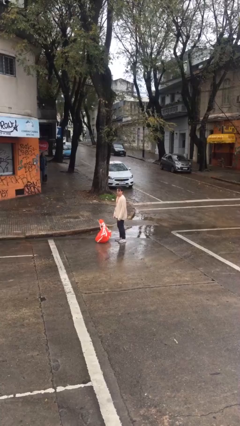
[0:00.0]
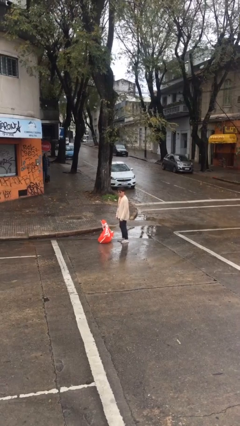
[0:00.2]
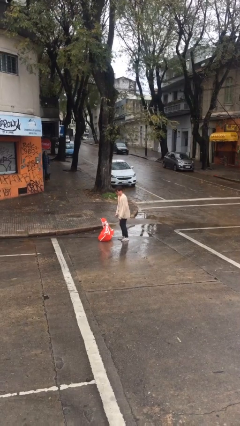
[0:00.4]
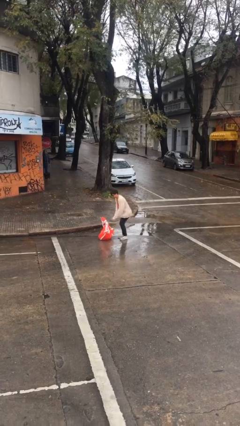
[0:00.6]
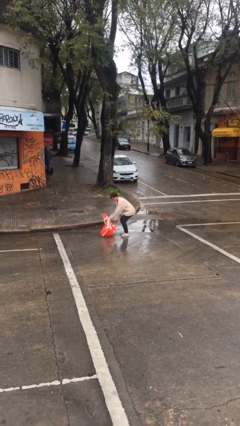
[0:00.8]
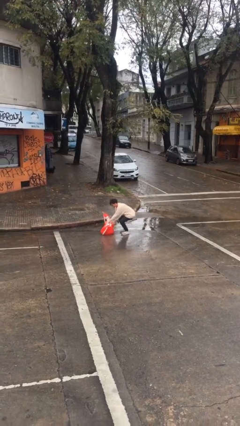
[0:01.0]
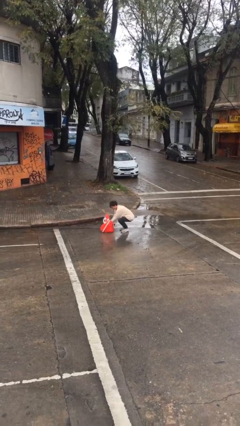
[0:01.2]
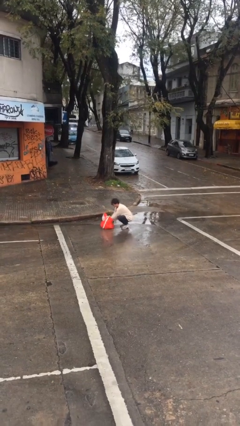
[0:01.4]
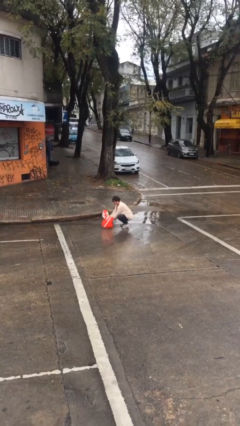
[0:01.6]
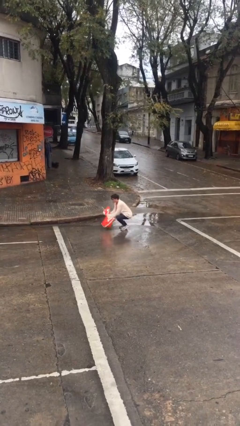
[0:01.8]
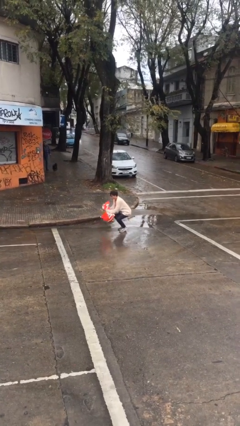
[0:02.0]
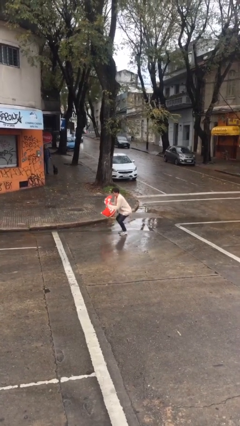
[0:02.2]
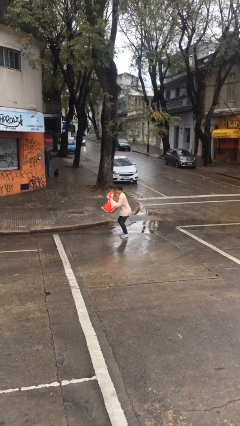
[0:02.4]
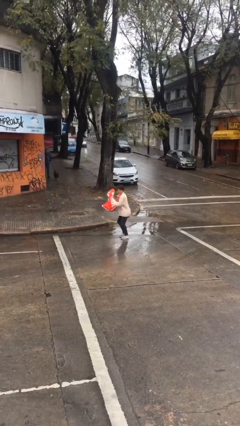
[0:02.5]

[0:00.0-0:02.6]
person picks up object from floor

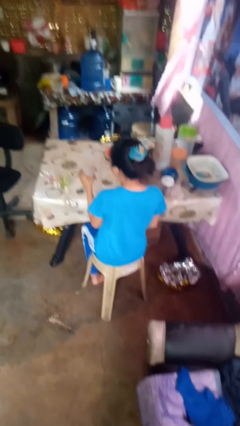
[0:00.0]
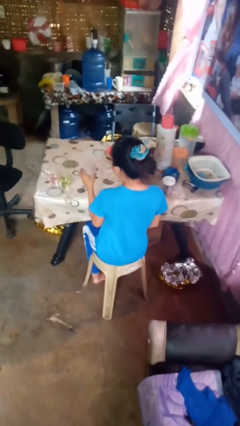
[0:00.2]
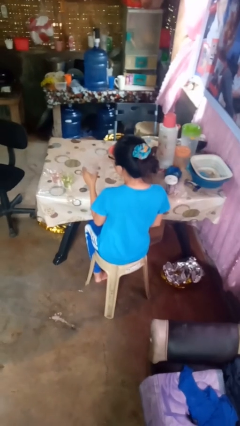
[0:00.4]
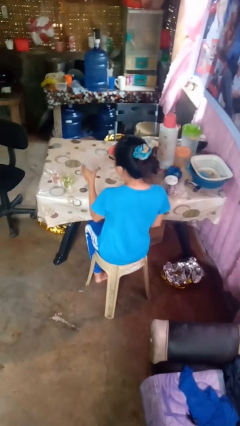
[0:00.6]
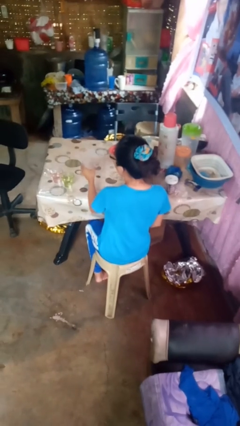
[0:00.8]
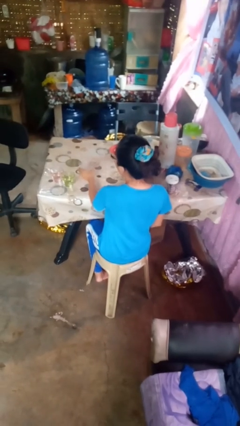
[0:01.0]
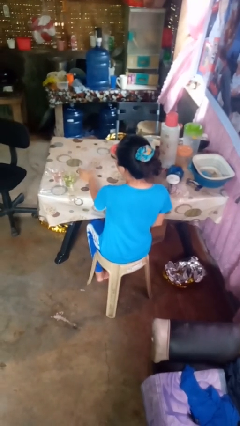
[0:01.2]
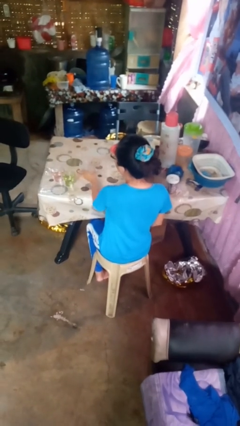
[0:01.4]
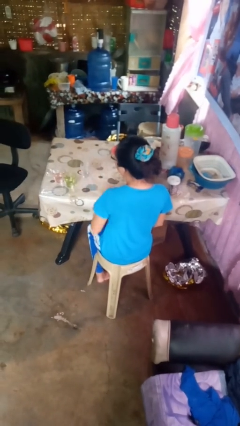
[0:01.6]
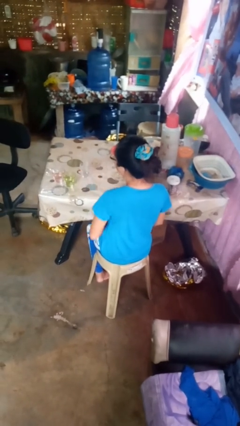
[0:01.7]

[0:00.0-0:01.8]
person puts down object on table

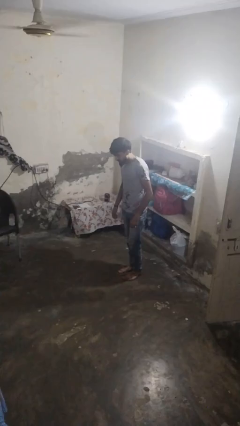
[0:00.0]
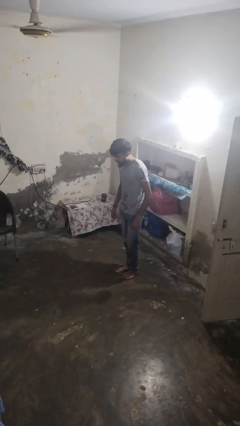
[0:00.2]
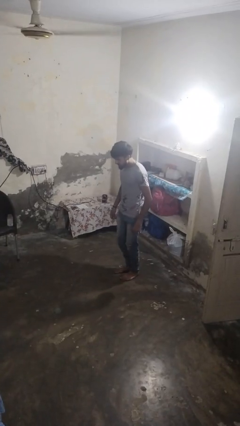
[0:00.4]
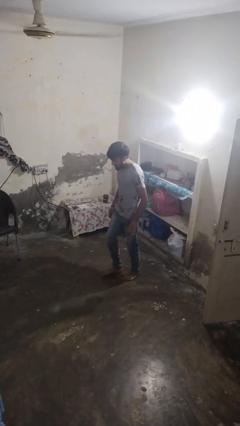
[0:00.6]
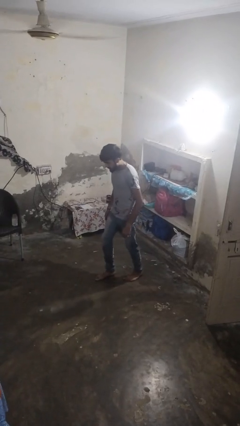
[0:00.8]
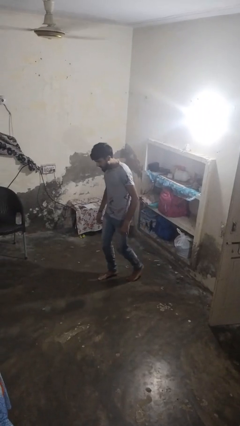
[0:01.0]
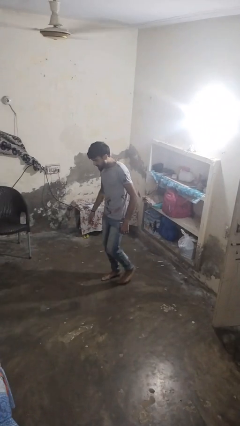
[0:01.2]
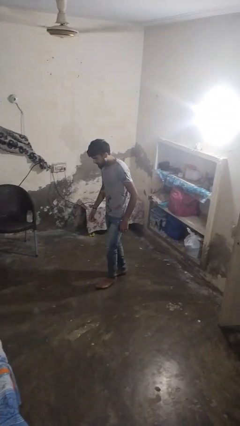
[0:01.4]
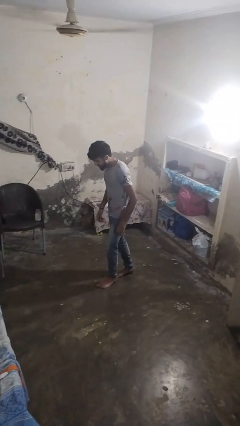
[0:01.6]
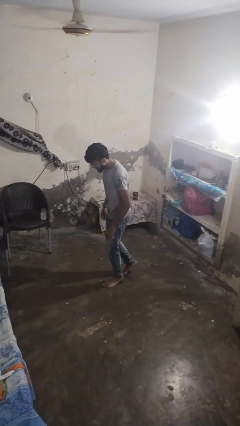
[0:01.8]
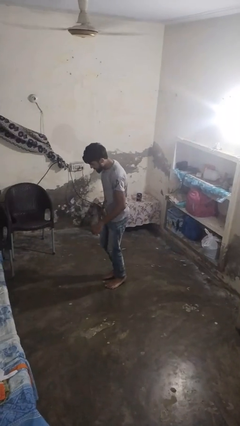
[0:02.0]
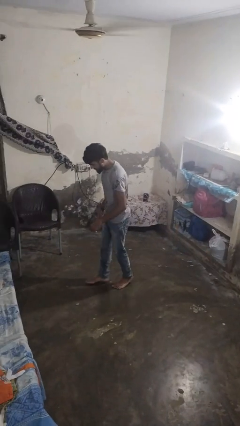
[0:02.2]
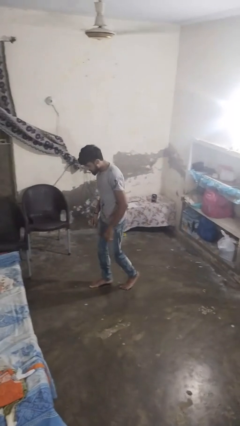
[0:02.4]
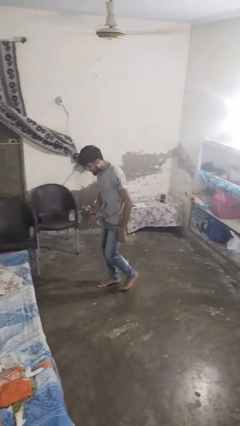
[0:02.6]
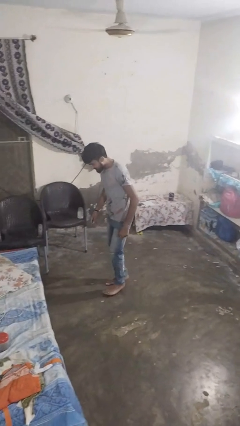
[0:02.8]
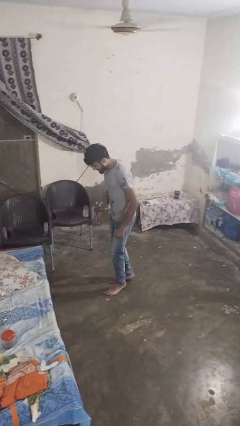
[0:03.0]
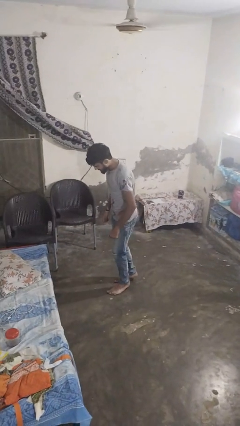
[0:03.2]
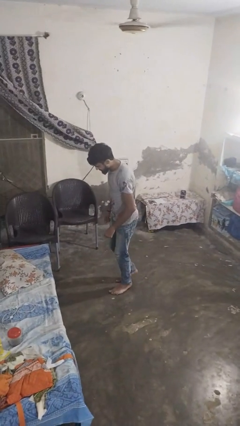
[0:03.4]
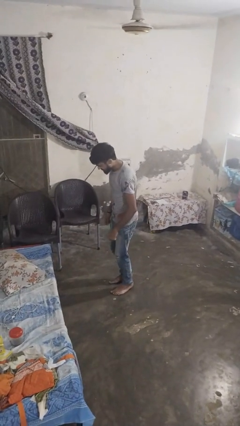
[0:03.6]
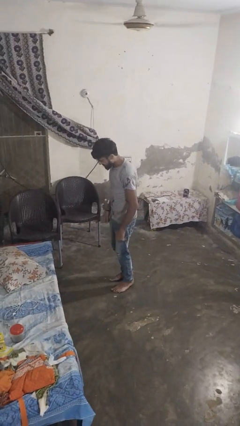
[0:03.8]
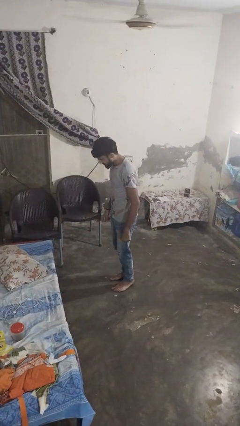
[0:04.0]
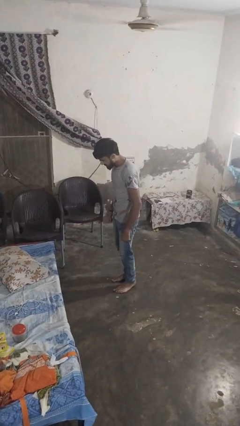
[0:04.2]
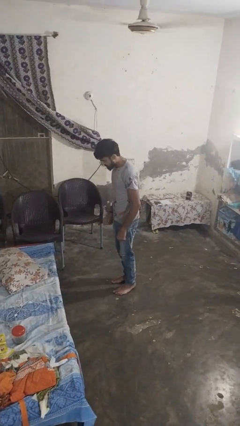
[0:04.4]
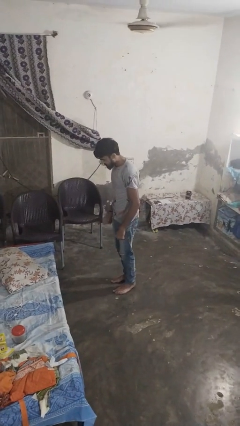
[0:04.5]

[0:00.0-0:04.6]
person walks tiptoe

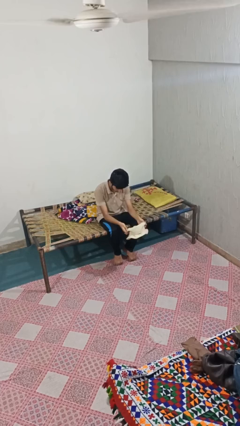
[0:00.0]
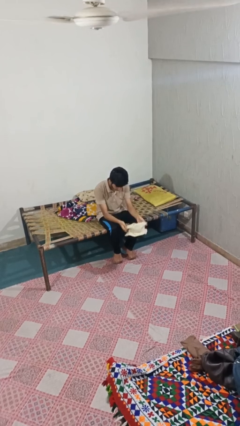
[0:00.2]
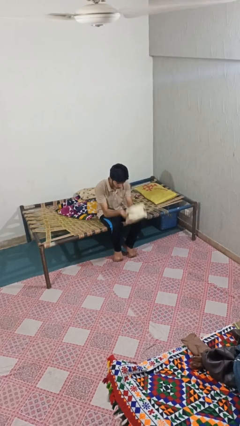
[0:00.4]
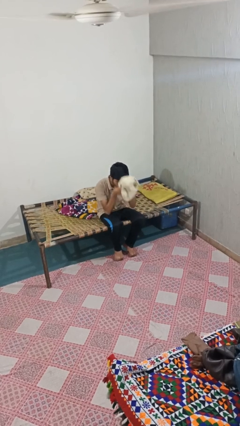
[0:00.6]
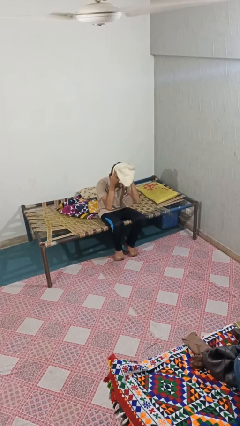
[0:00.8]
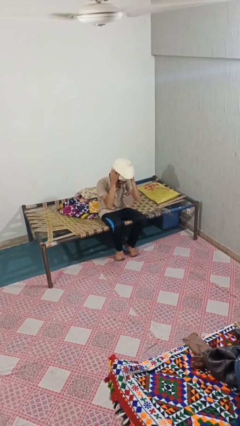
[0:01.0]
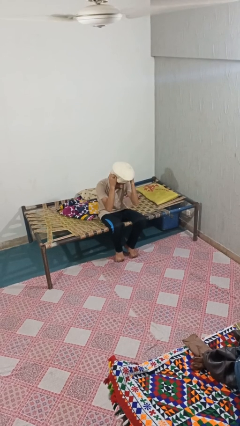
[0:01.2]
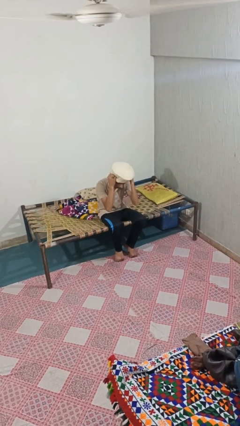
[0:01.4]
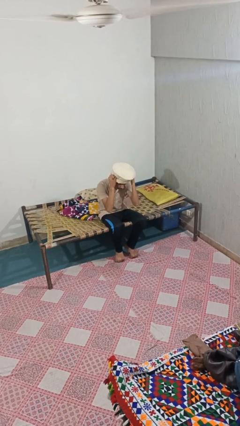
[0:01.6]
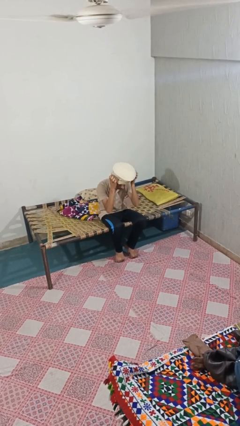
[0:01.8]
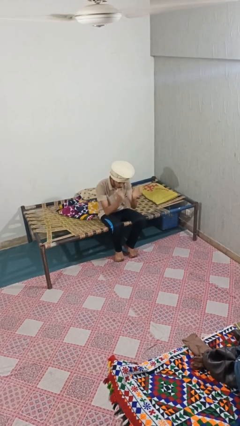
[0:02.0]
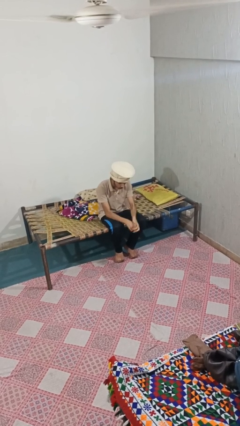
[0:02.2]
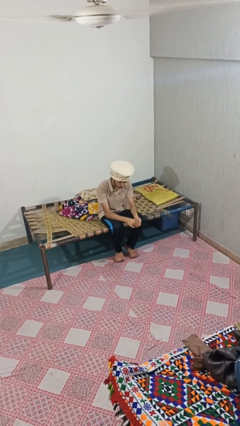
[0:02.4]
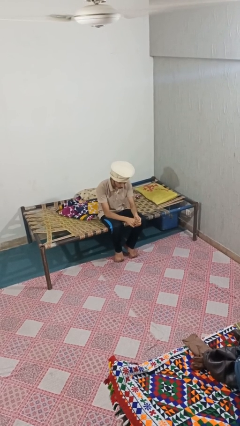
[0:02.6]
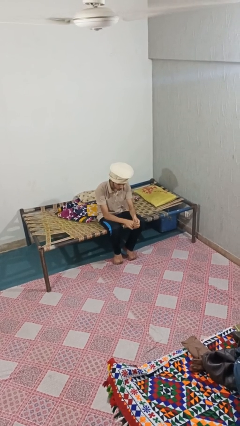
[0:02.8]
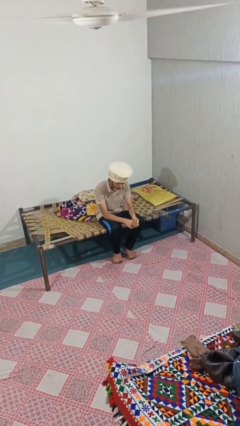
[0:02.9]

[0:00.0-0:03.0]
person puts on hat

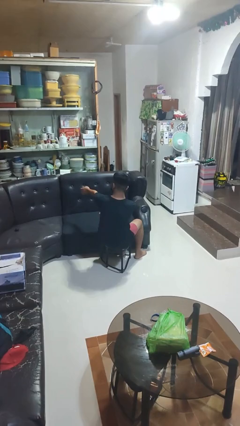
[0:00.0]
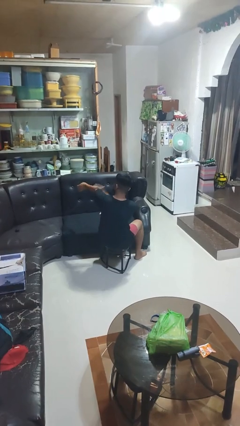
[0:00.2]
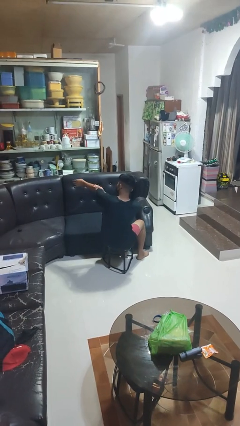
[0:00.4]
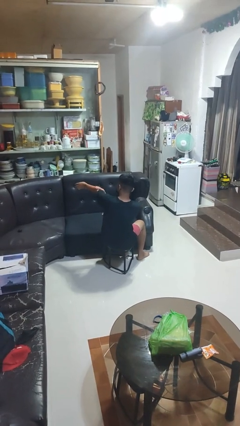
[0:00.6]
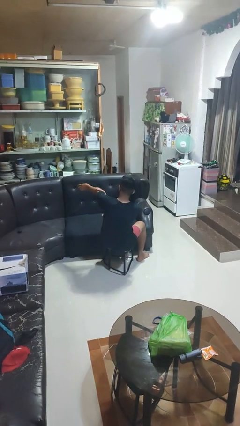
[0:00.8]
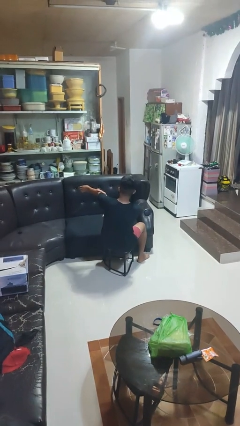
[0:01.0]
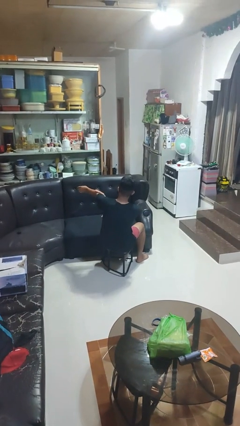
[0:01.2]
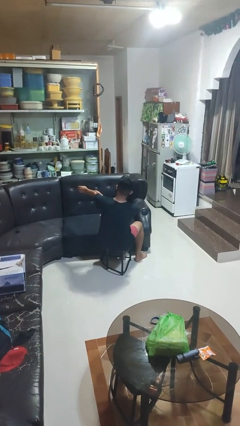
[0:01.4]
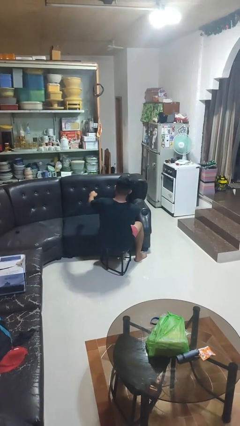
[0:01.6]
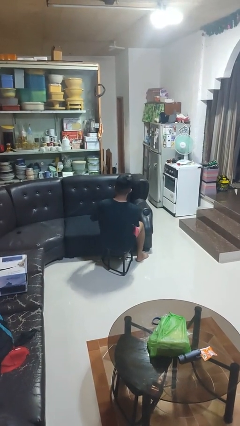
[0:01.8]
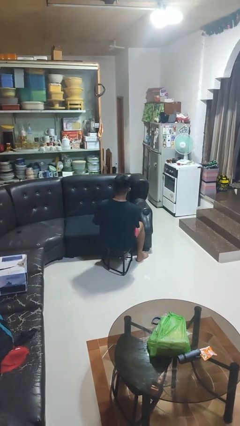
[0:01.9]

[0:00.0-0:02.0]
person swats bug

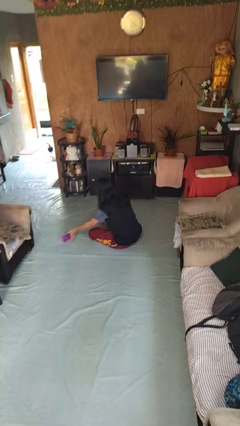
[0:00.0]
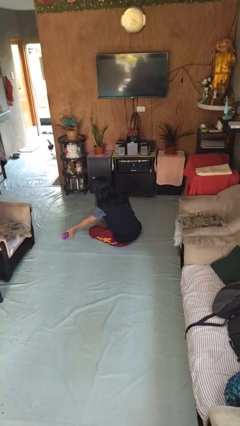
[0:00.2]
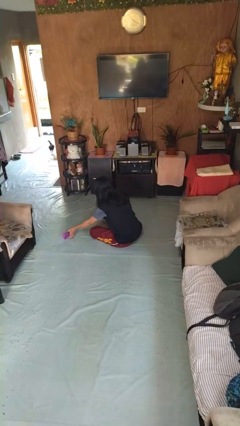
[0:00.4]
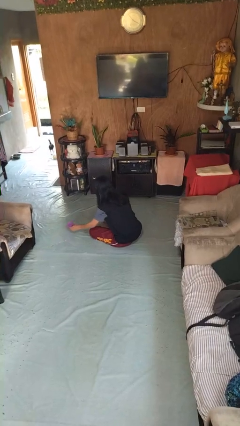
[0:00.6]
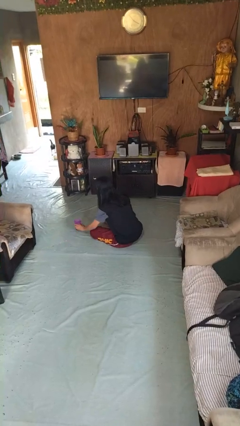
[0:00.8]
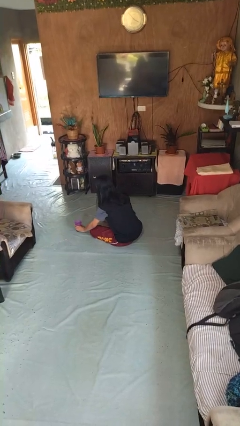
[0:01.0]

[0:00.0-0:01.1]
person sets upright glass

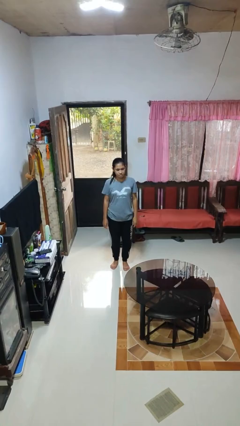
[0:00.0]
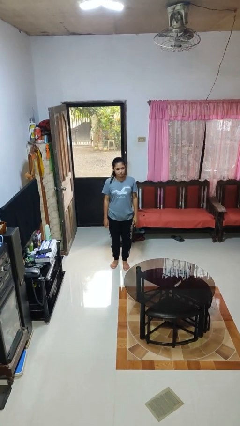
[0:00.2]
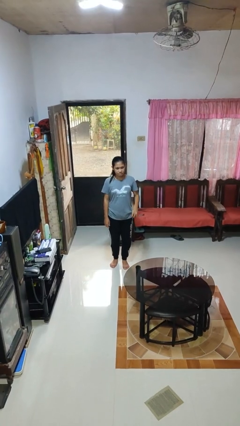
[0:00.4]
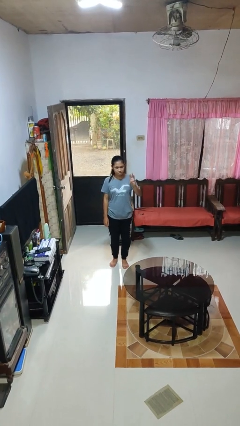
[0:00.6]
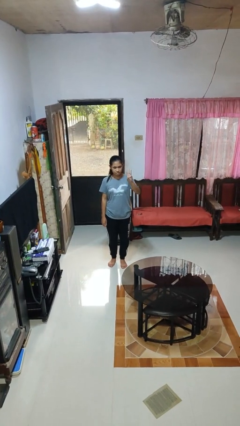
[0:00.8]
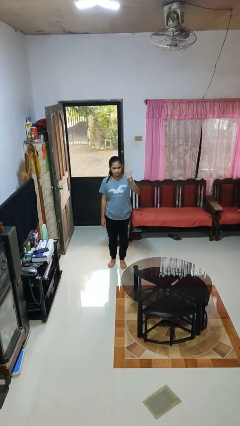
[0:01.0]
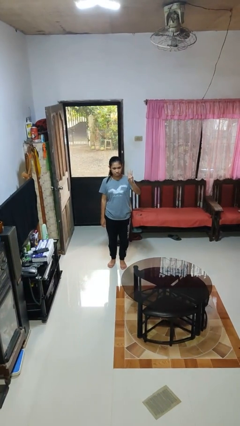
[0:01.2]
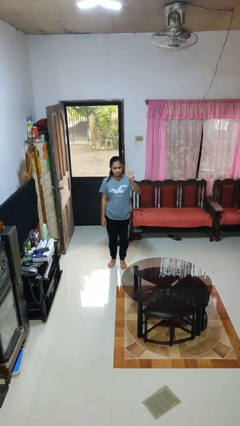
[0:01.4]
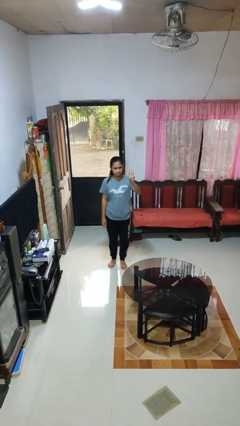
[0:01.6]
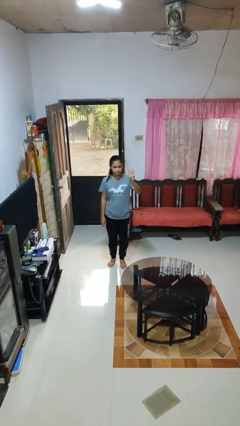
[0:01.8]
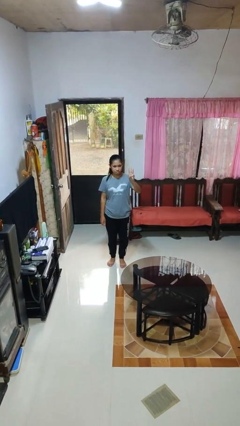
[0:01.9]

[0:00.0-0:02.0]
person gestures number three

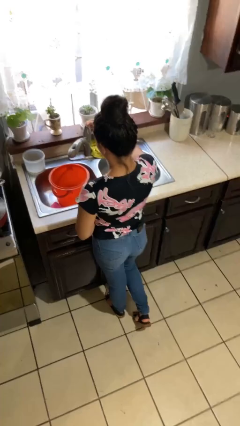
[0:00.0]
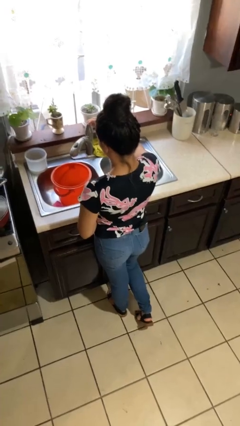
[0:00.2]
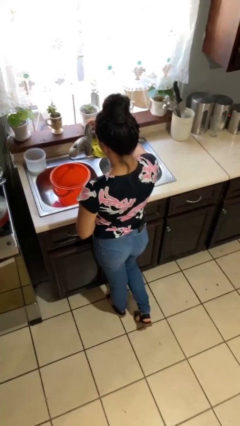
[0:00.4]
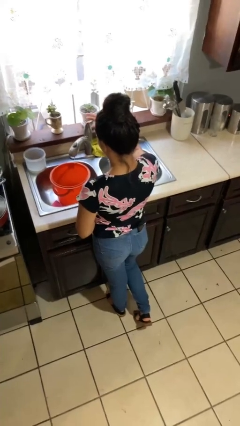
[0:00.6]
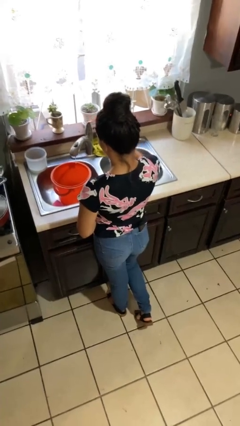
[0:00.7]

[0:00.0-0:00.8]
person turns on faucet
